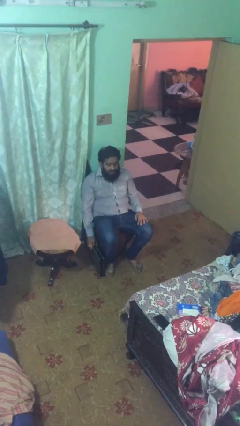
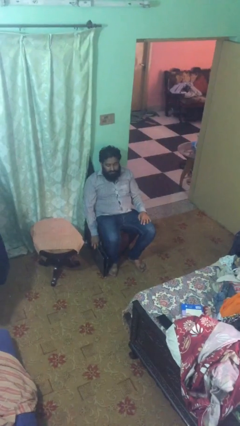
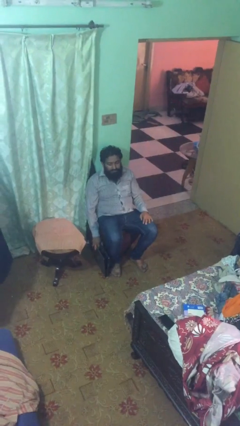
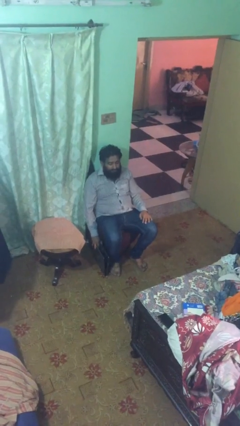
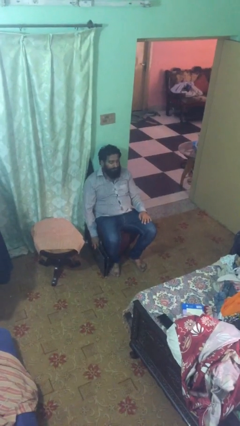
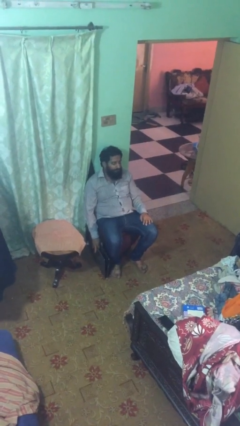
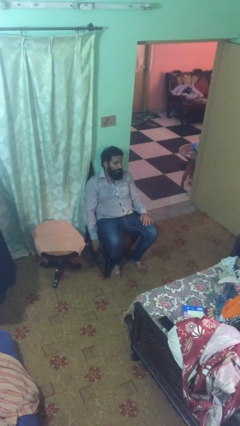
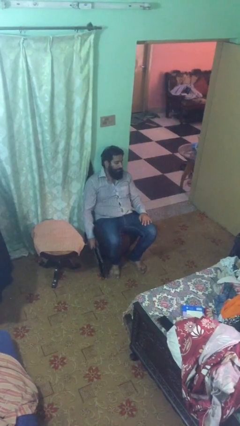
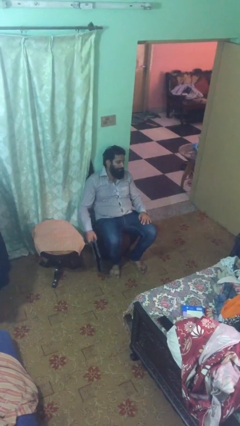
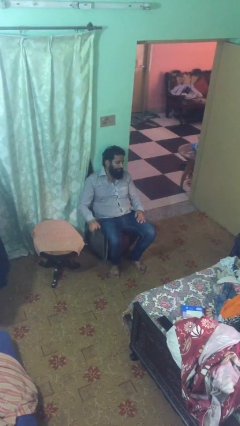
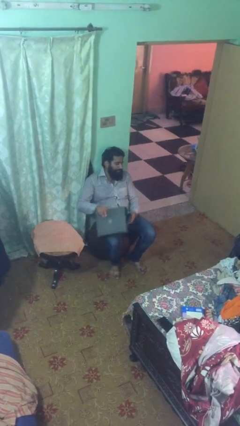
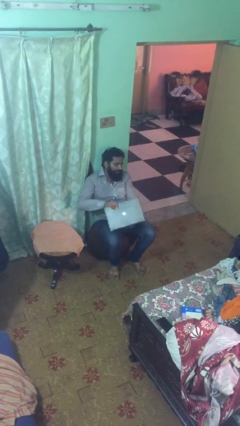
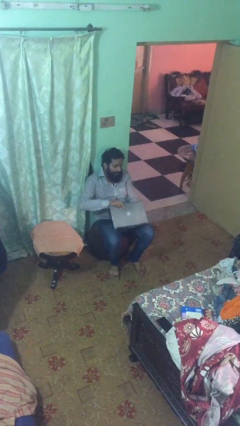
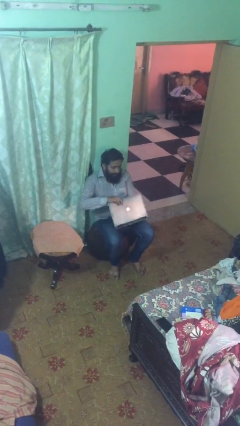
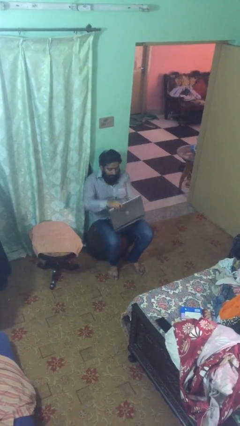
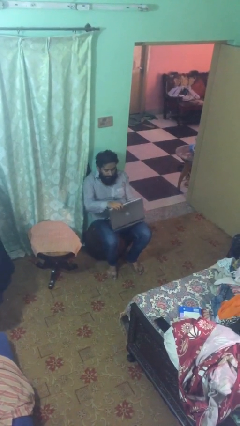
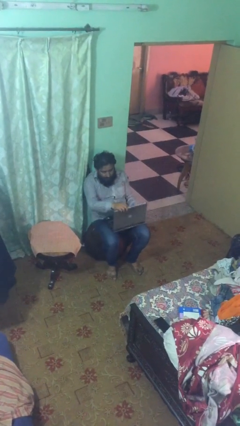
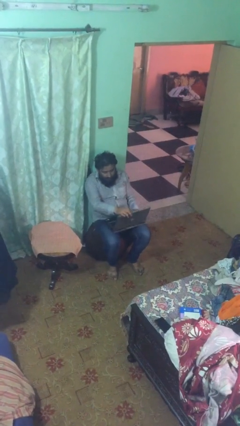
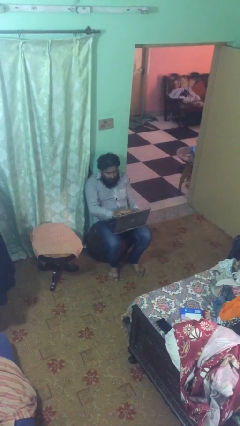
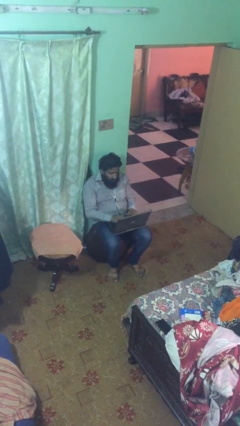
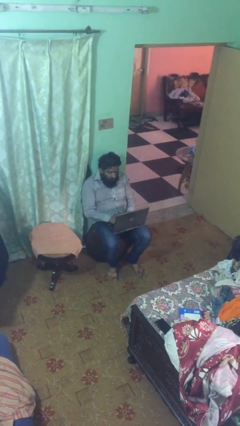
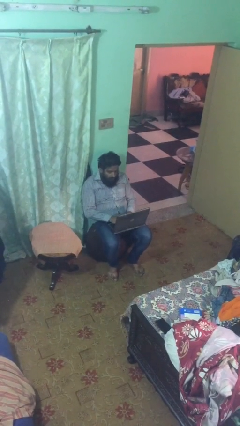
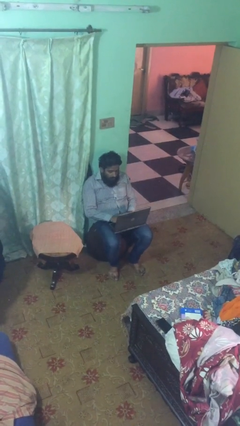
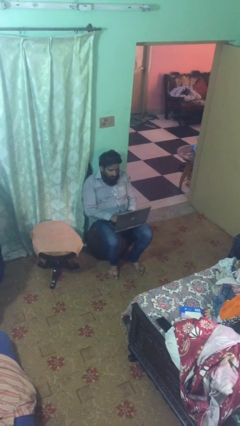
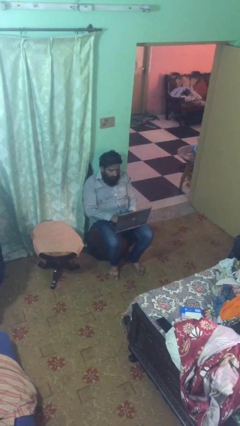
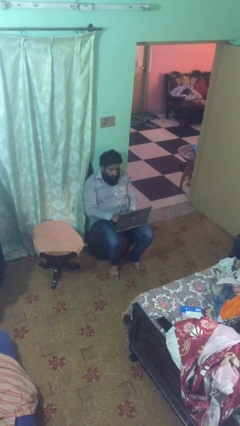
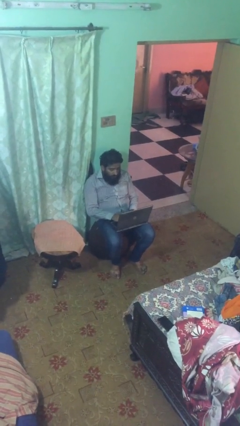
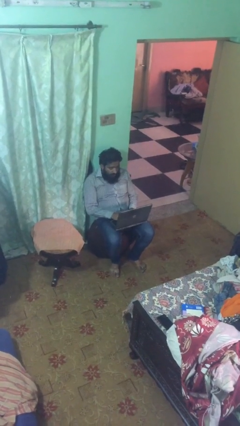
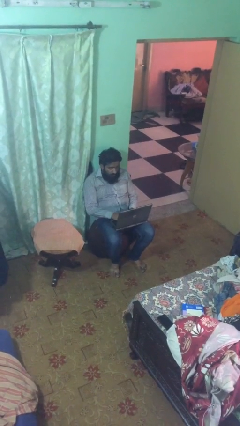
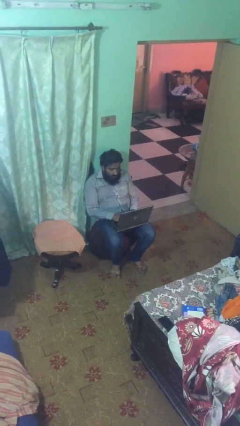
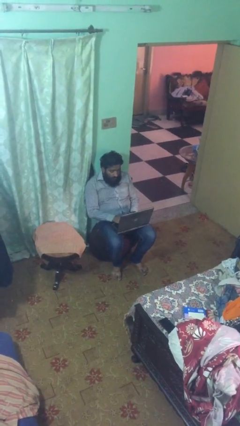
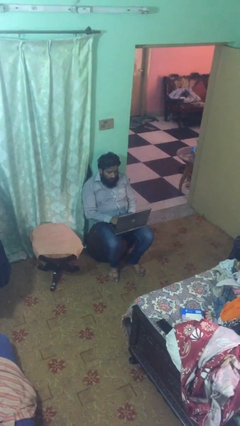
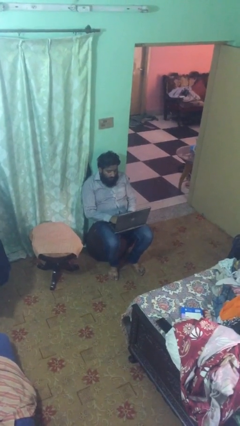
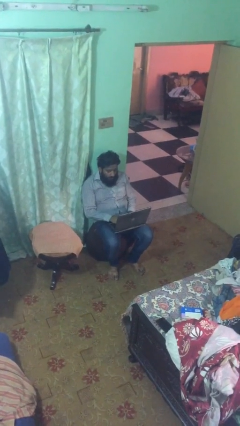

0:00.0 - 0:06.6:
person interacts with laptop

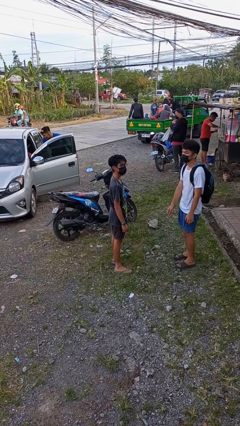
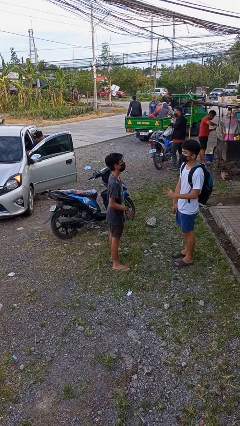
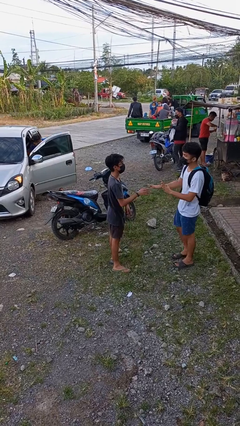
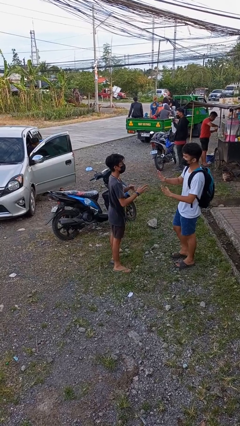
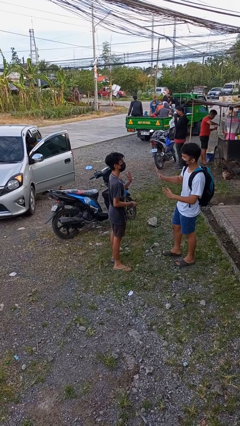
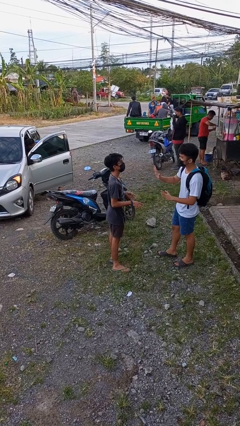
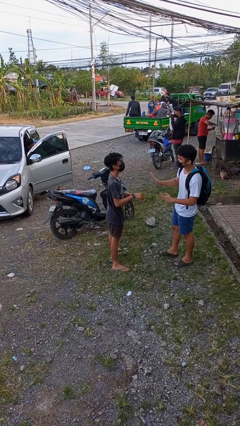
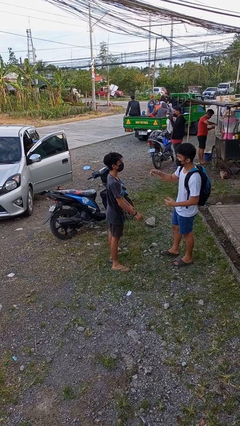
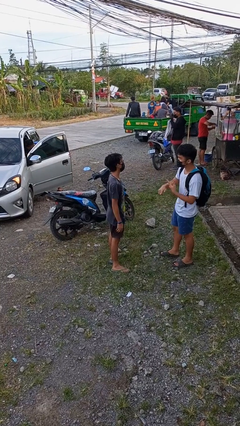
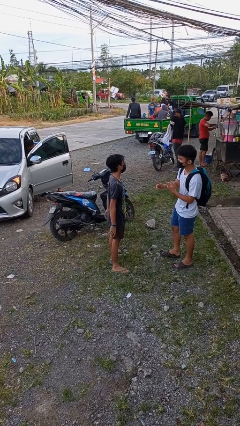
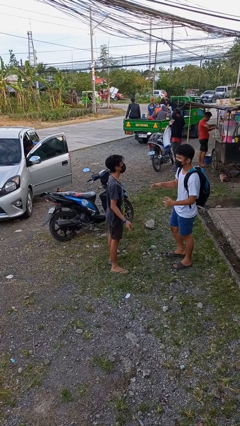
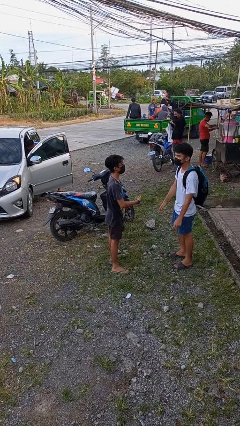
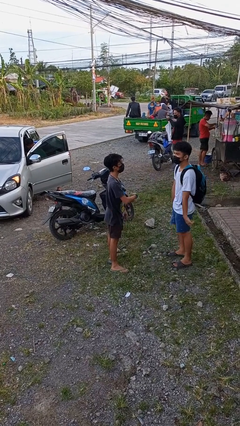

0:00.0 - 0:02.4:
person talks to person

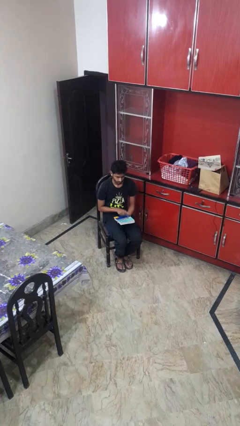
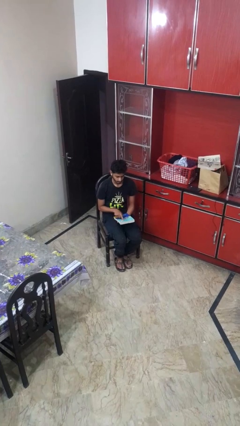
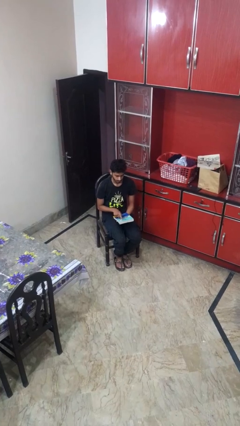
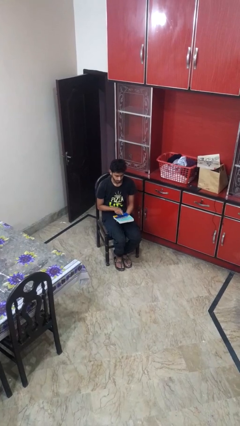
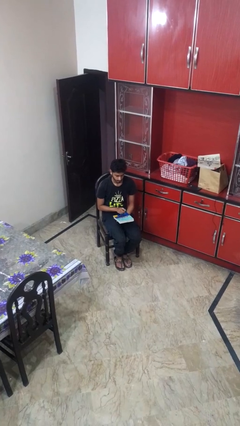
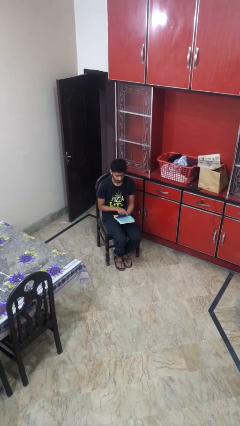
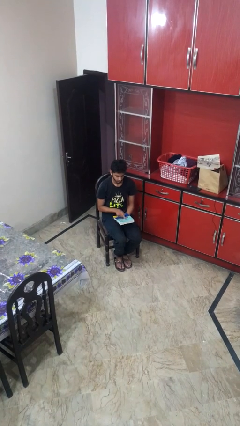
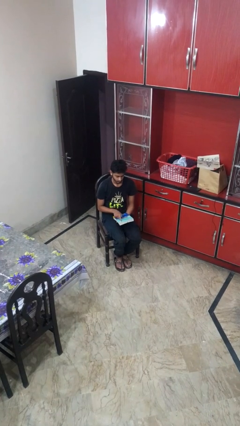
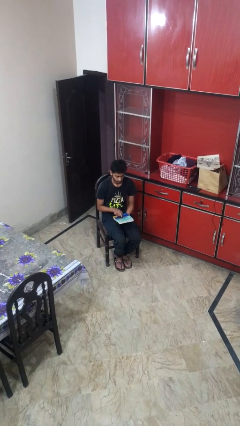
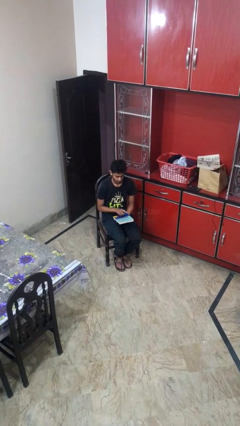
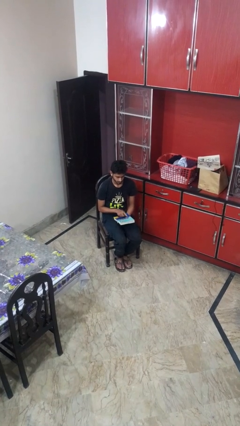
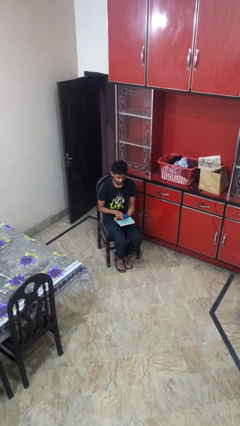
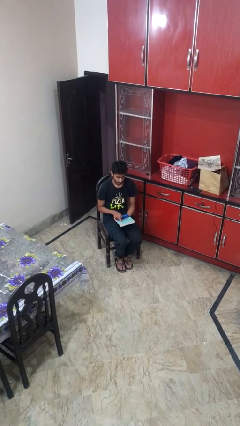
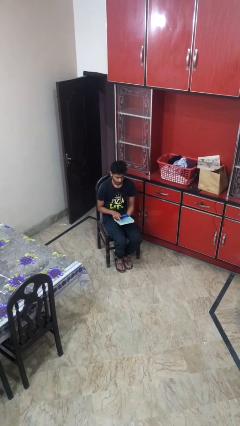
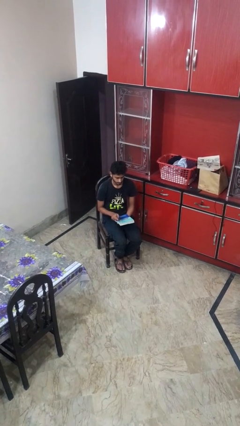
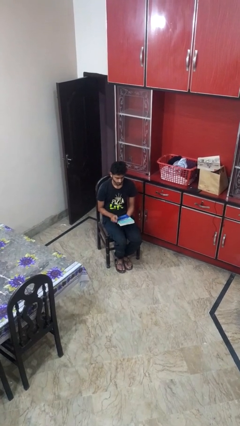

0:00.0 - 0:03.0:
person taps object with finger

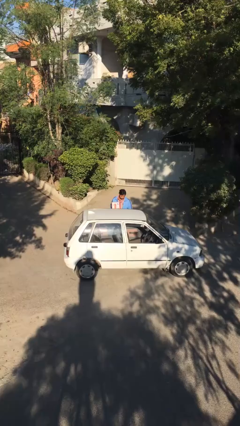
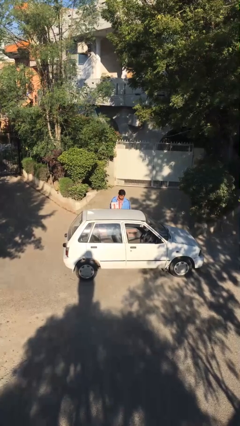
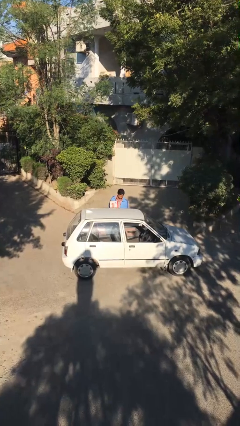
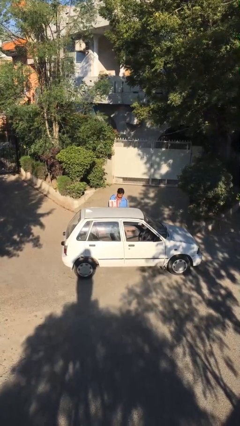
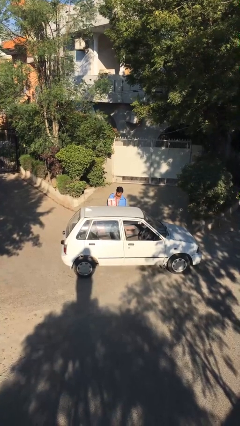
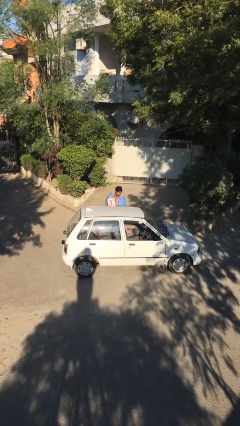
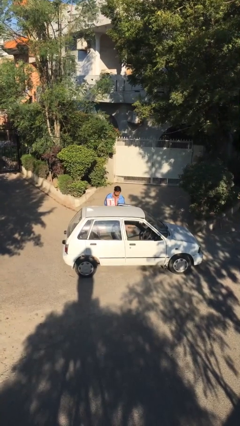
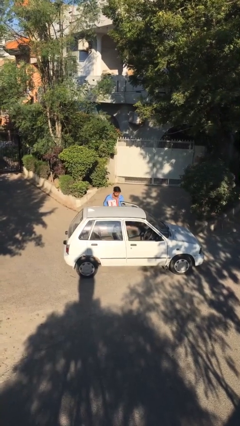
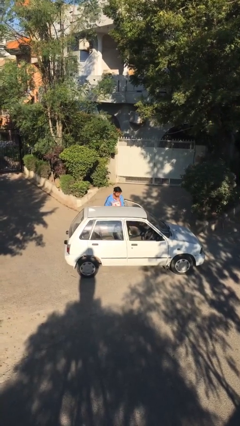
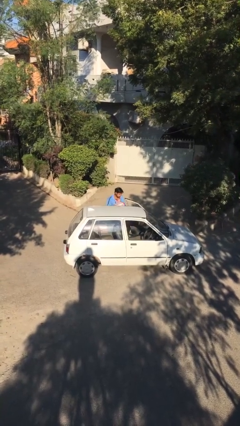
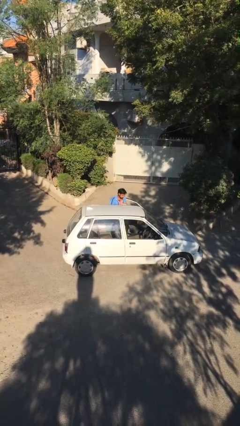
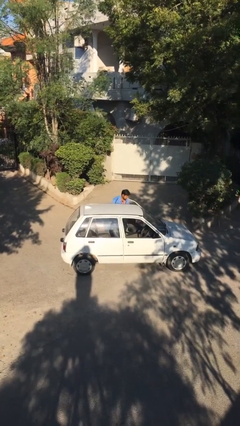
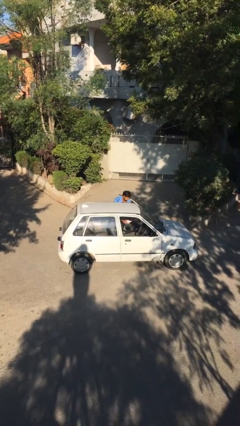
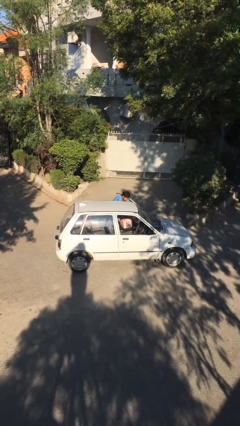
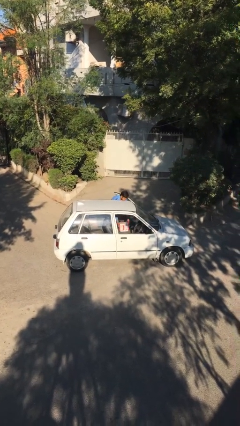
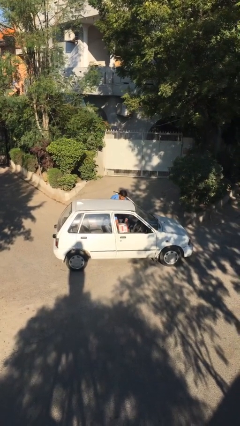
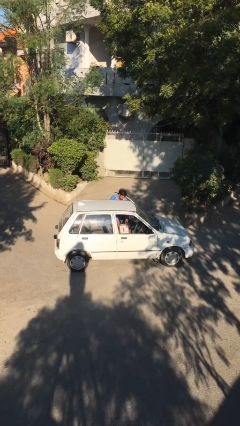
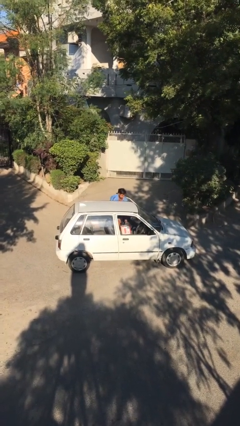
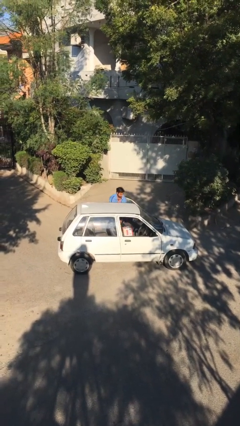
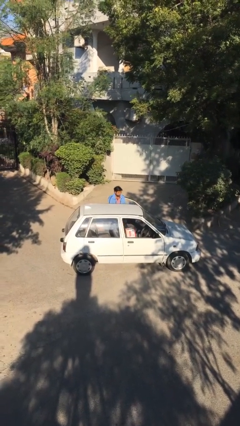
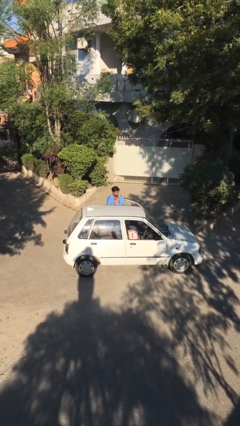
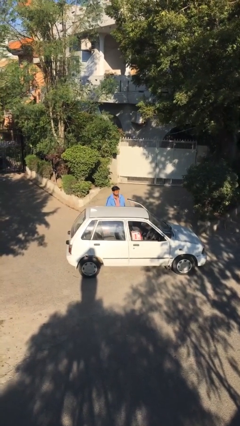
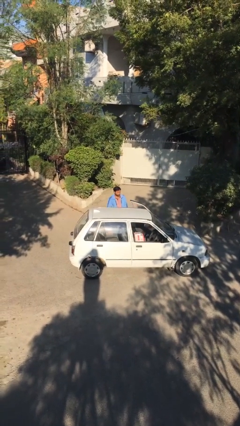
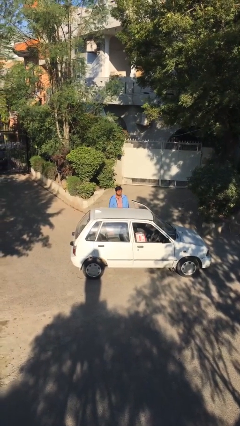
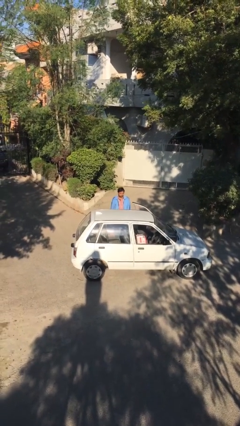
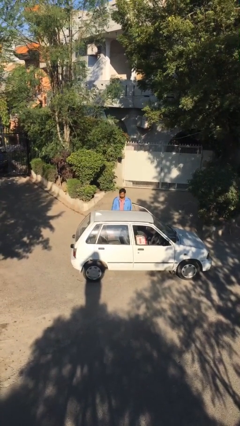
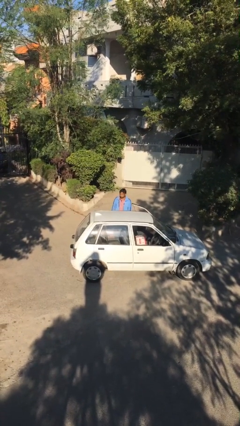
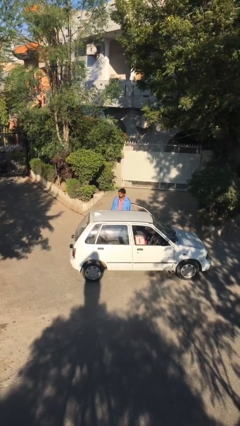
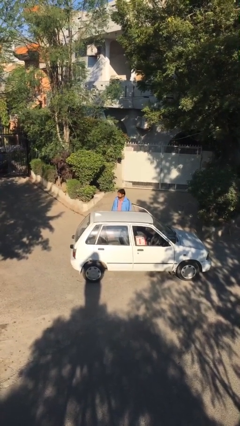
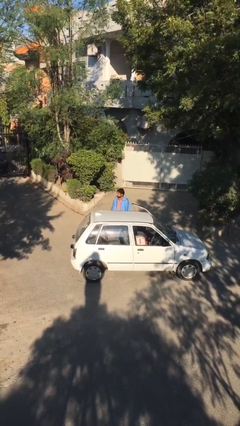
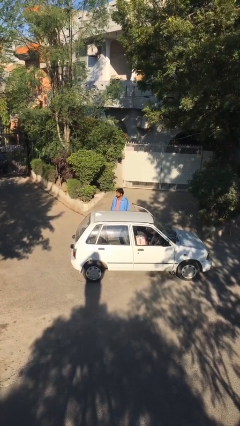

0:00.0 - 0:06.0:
person loads car
